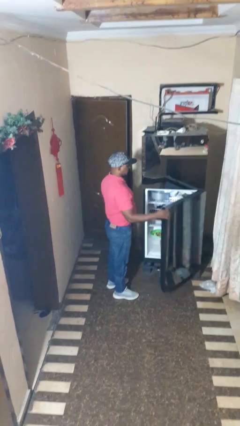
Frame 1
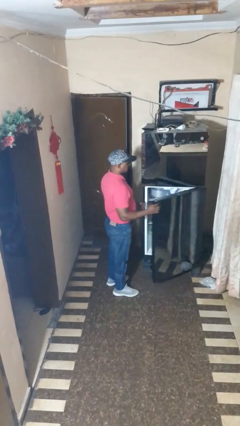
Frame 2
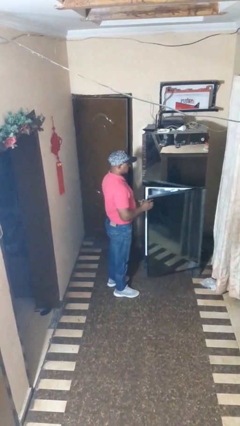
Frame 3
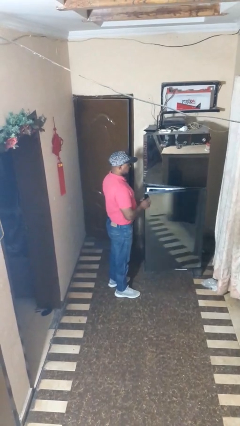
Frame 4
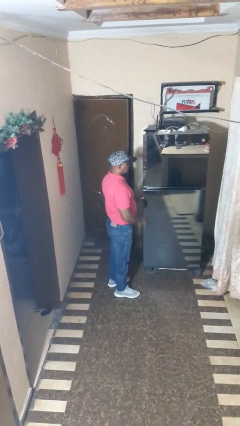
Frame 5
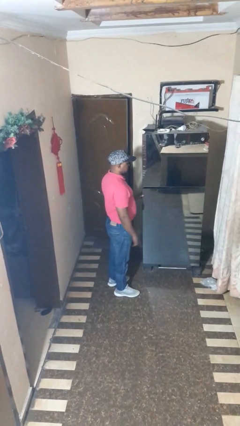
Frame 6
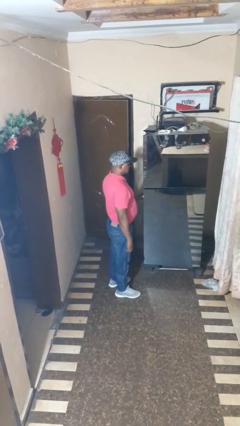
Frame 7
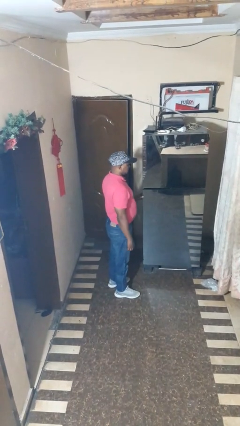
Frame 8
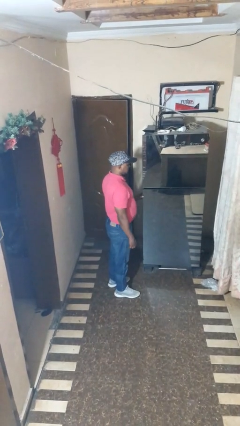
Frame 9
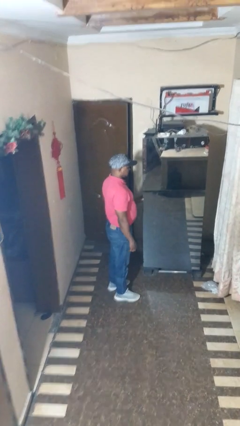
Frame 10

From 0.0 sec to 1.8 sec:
person closes refrigerator

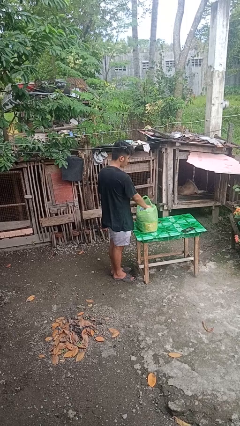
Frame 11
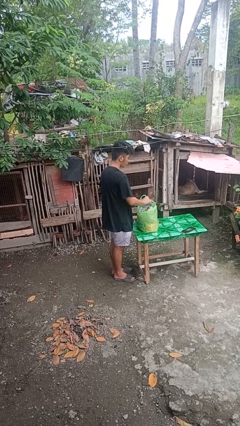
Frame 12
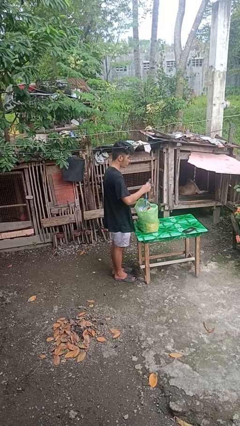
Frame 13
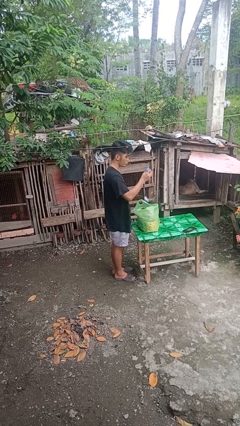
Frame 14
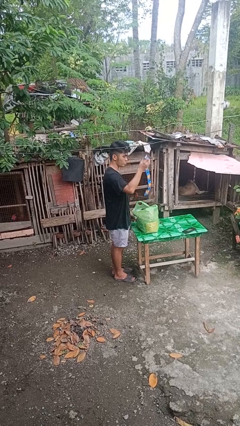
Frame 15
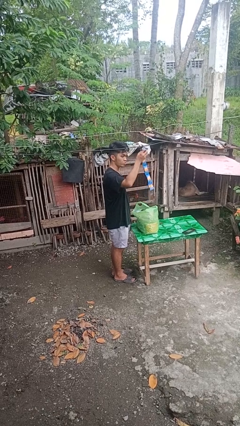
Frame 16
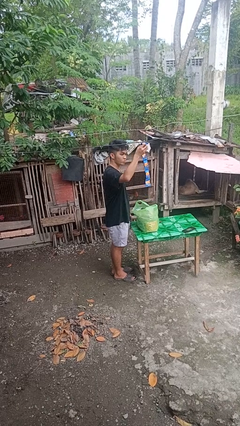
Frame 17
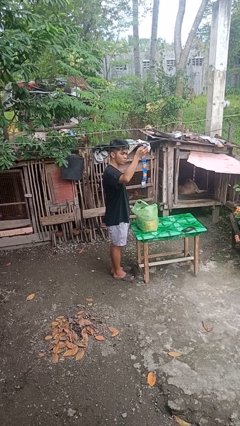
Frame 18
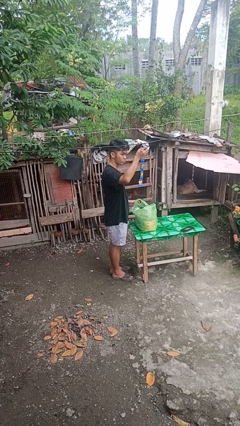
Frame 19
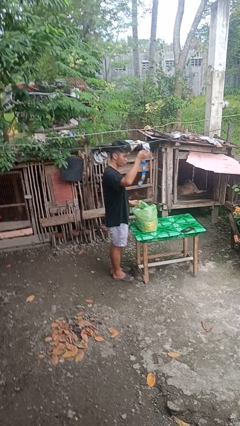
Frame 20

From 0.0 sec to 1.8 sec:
person takes object from bag

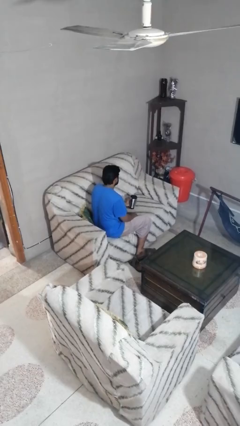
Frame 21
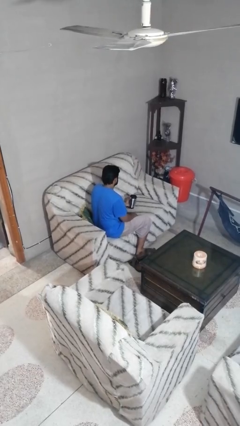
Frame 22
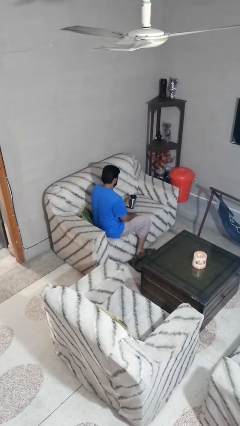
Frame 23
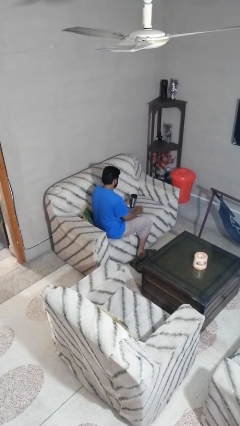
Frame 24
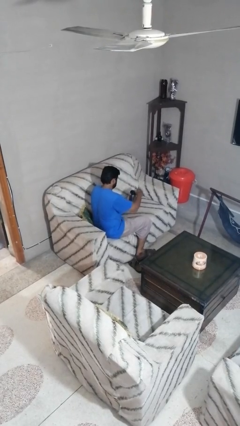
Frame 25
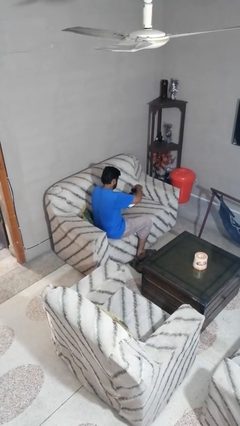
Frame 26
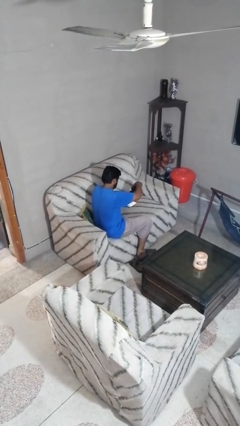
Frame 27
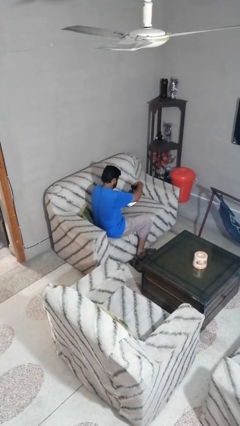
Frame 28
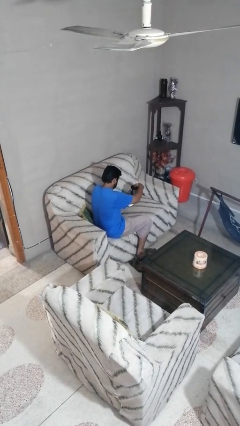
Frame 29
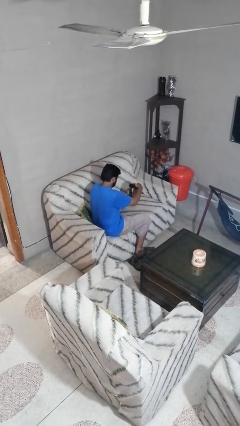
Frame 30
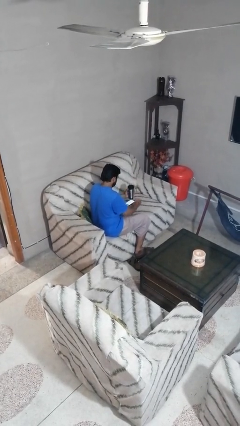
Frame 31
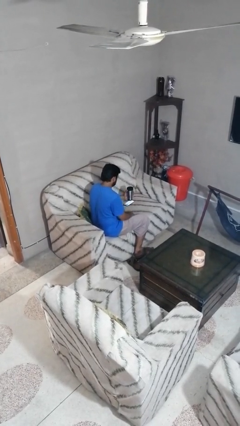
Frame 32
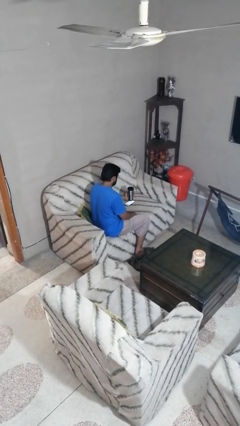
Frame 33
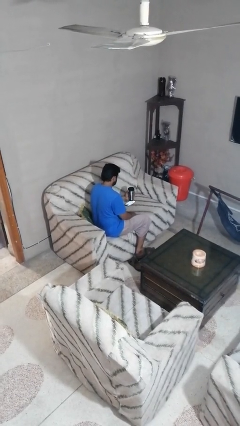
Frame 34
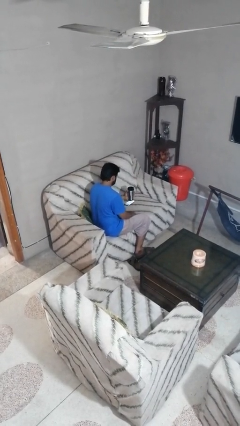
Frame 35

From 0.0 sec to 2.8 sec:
person opens beverage can

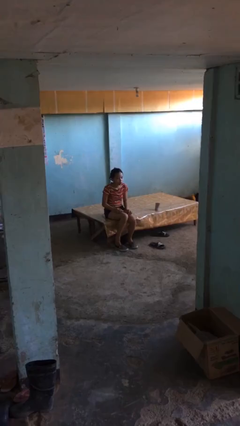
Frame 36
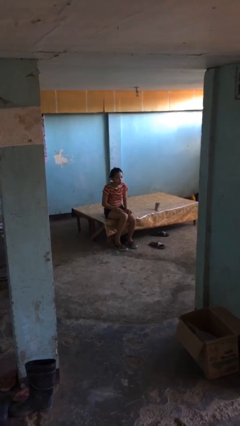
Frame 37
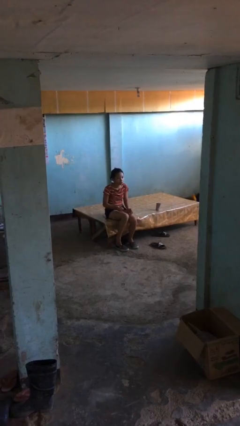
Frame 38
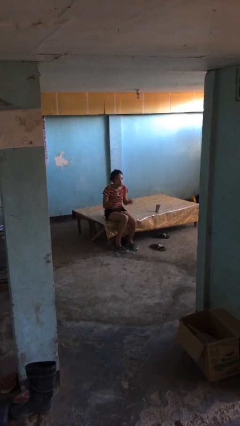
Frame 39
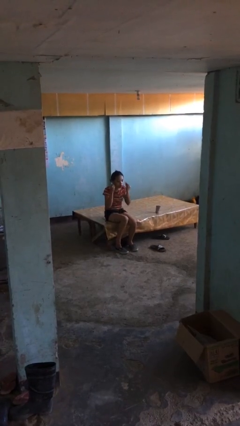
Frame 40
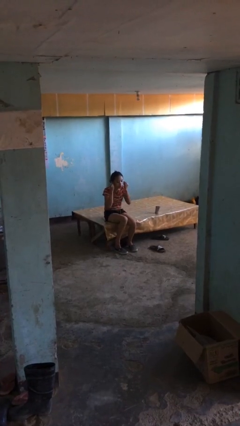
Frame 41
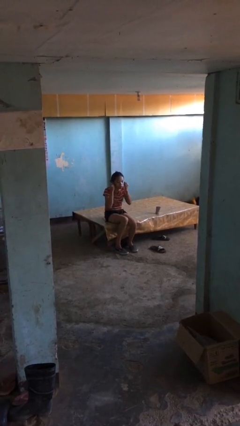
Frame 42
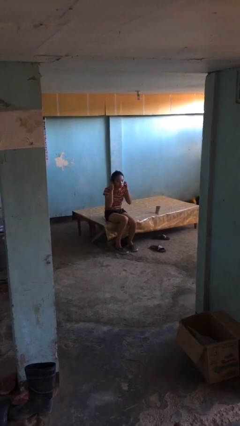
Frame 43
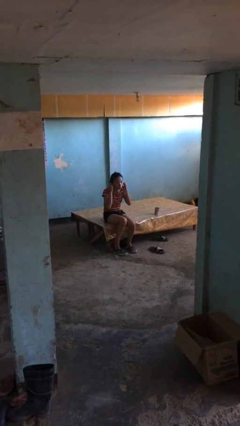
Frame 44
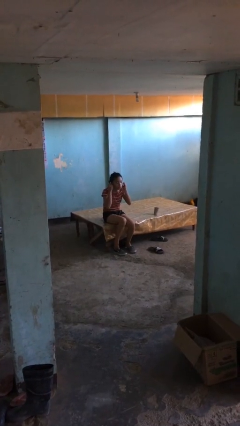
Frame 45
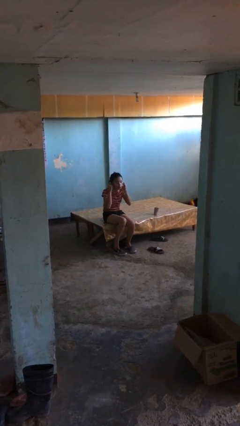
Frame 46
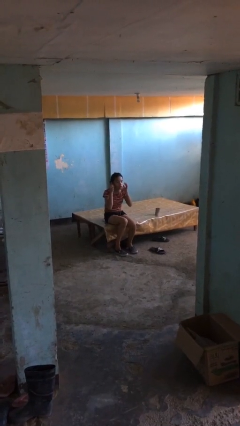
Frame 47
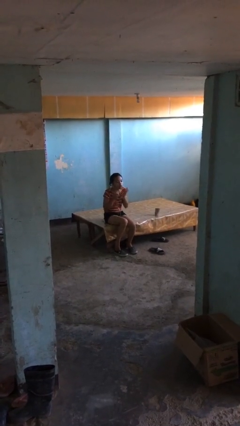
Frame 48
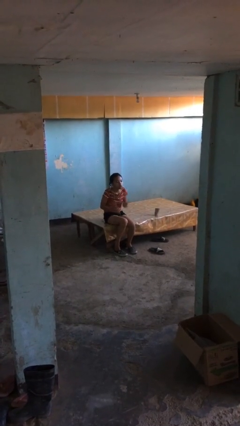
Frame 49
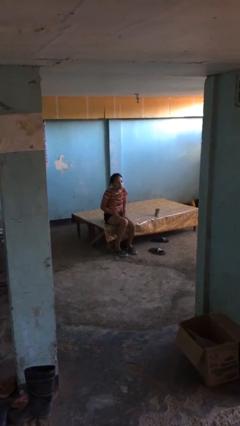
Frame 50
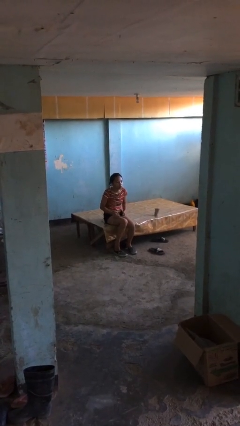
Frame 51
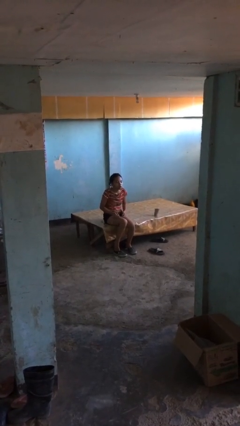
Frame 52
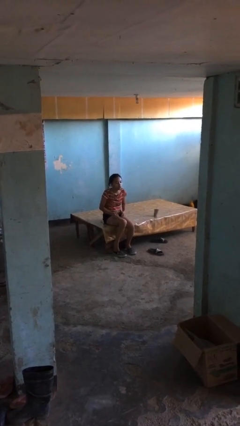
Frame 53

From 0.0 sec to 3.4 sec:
person puts on headphones

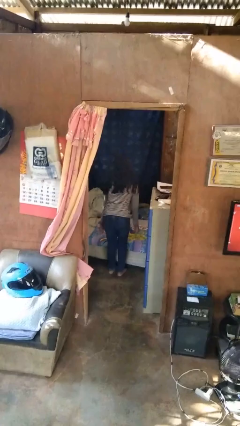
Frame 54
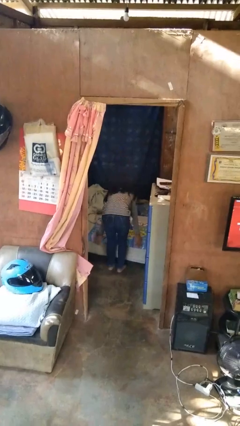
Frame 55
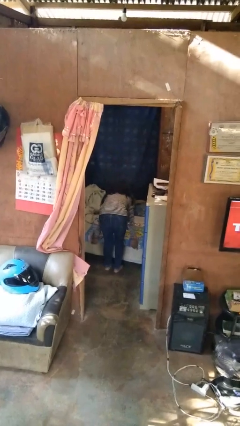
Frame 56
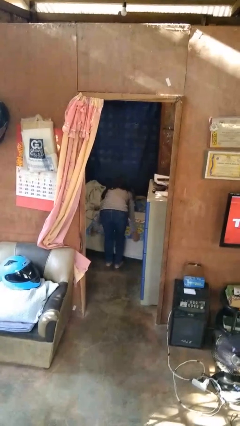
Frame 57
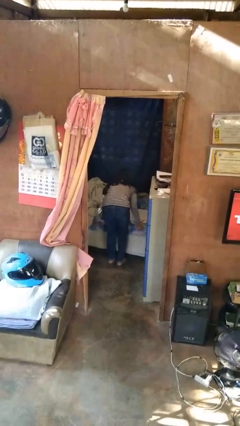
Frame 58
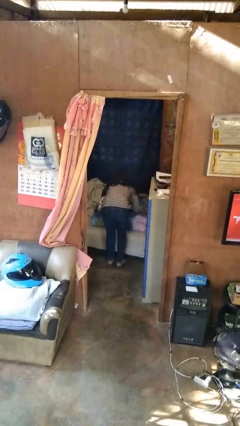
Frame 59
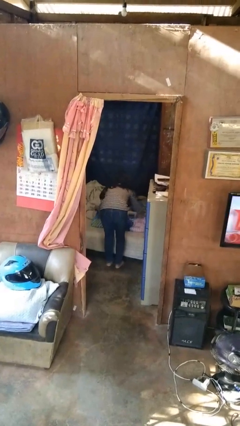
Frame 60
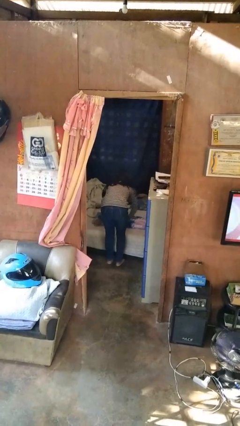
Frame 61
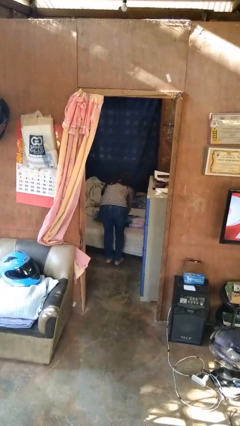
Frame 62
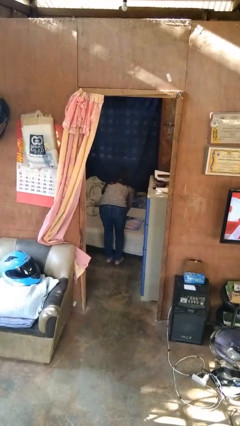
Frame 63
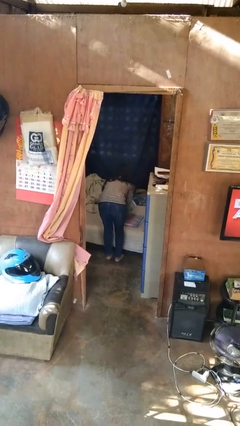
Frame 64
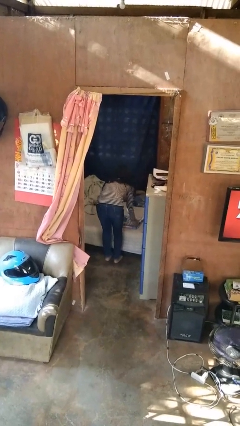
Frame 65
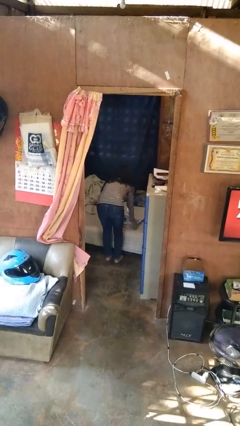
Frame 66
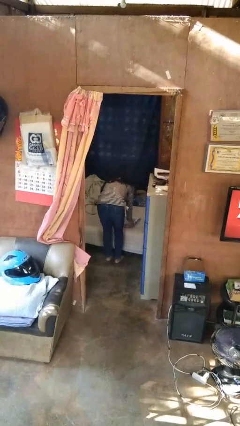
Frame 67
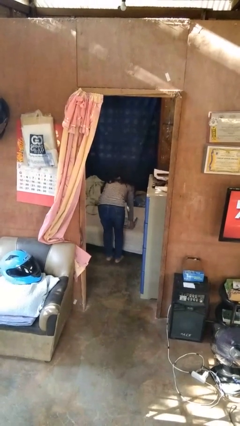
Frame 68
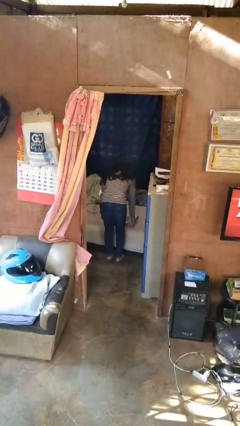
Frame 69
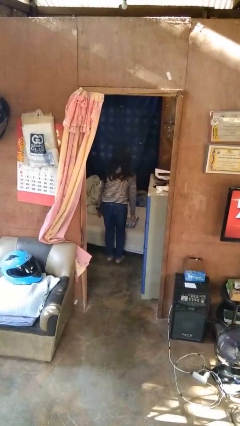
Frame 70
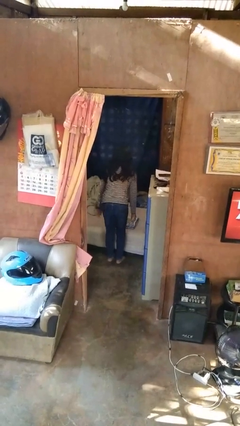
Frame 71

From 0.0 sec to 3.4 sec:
person folds blanket

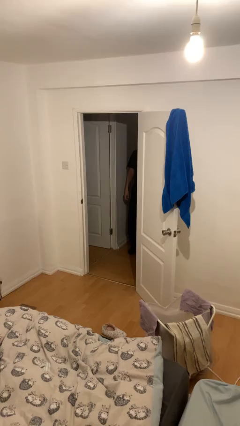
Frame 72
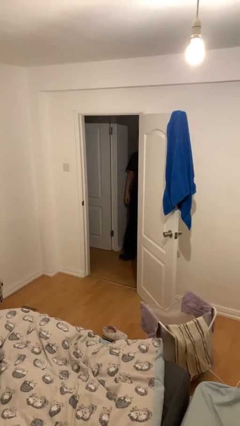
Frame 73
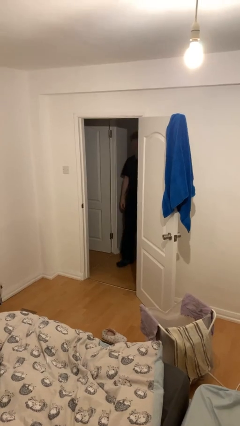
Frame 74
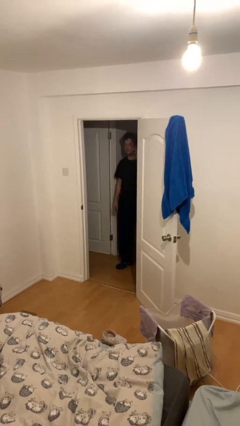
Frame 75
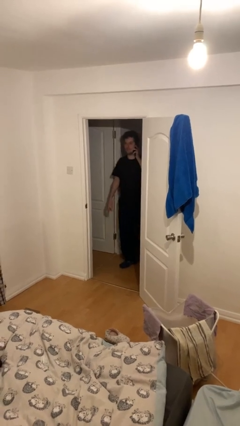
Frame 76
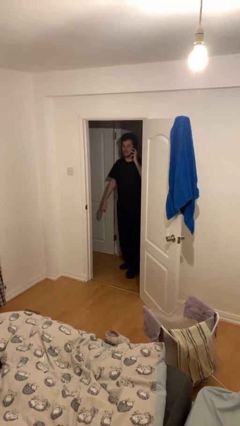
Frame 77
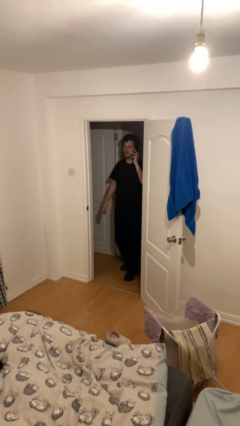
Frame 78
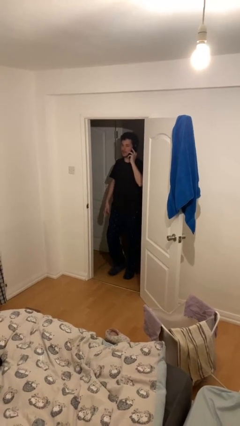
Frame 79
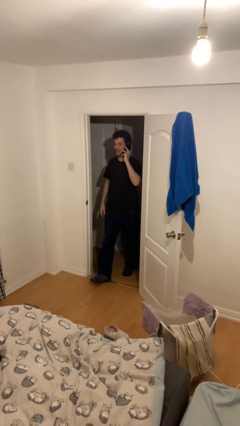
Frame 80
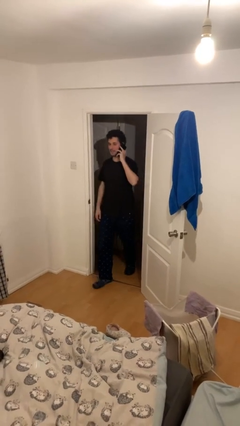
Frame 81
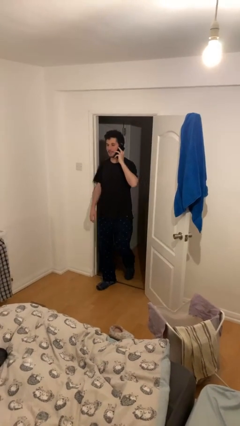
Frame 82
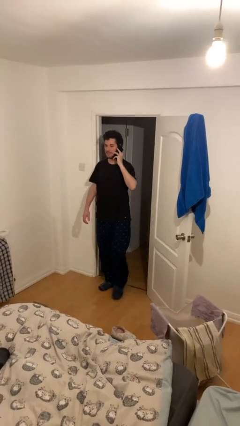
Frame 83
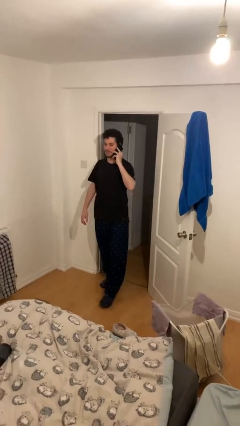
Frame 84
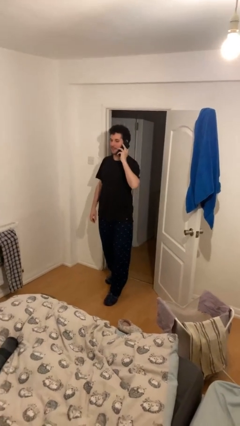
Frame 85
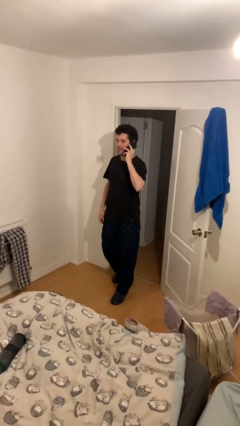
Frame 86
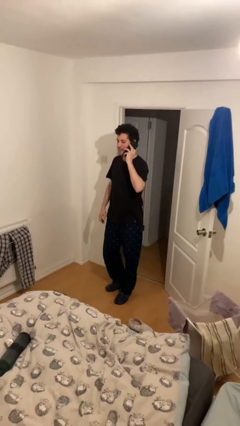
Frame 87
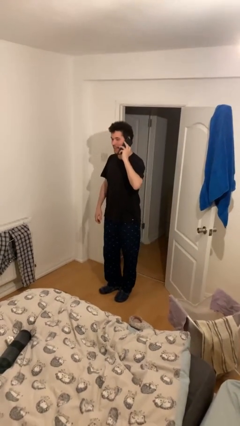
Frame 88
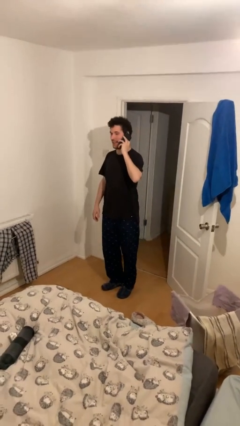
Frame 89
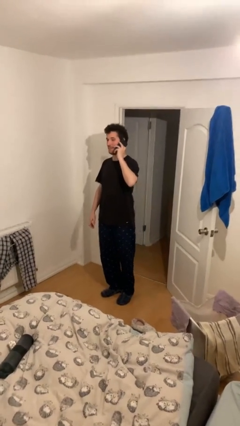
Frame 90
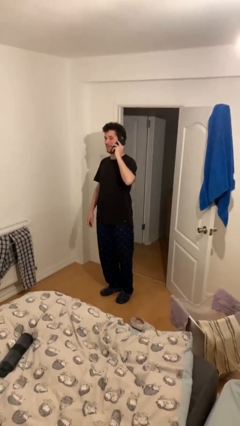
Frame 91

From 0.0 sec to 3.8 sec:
person enters scene through structure

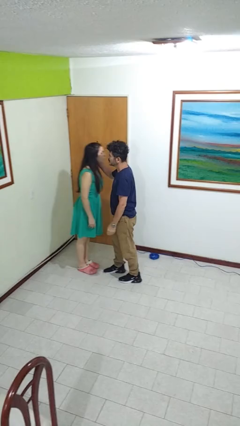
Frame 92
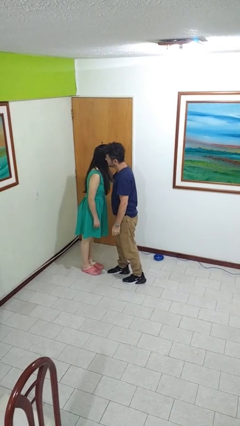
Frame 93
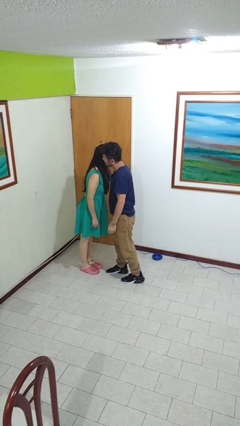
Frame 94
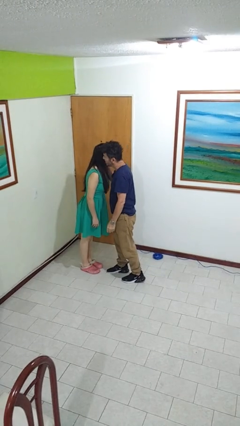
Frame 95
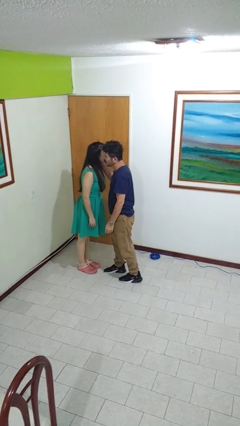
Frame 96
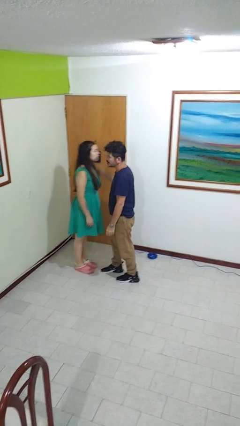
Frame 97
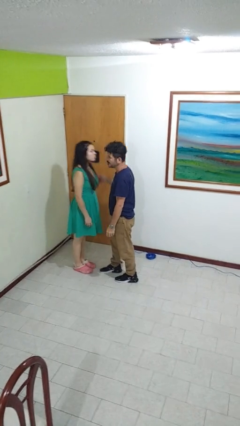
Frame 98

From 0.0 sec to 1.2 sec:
person kisses cheek of person
